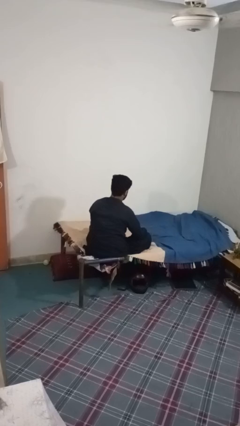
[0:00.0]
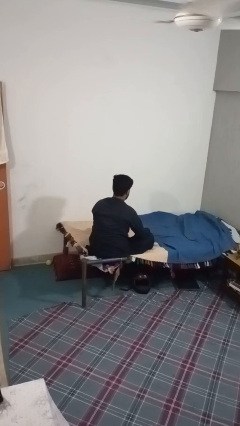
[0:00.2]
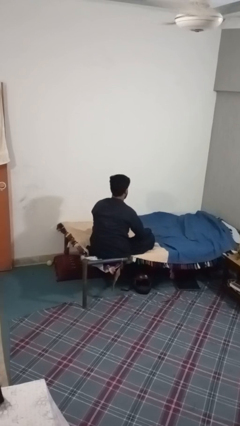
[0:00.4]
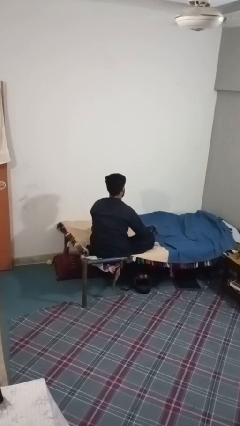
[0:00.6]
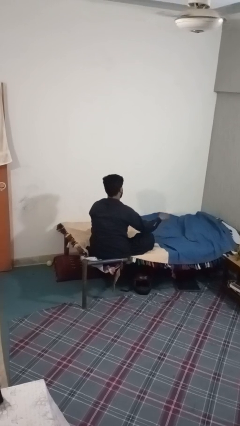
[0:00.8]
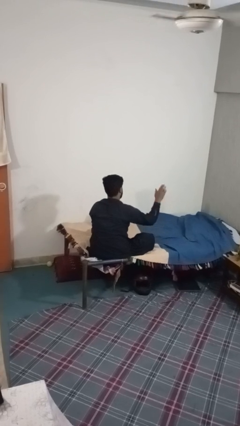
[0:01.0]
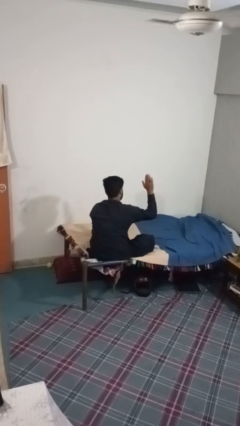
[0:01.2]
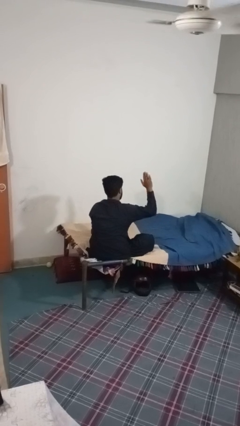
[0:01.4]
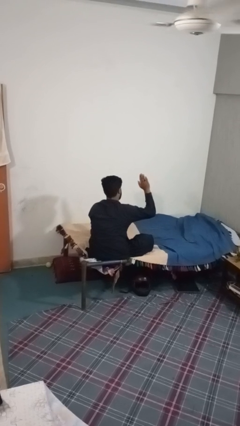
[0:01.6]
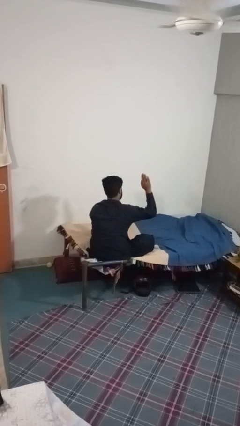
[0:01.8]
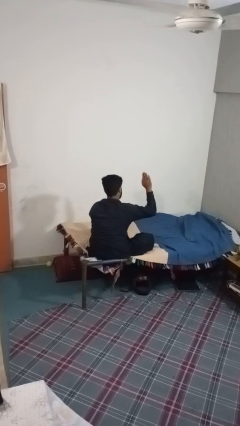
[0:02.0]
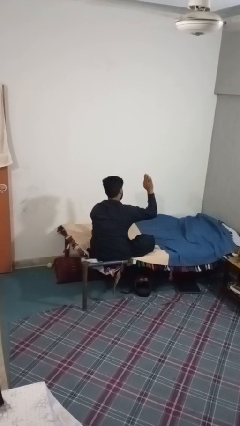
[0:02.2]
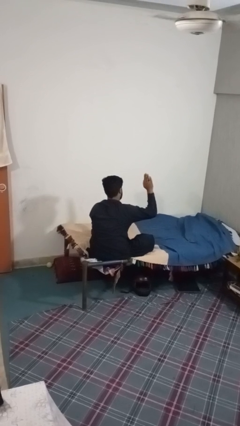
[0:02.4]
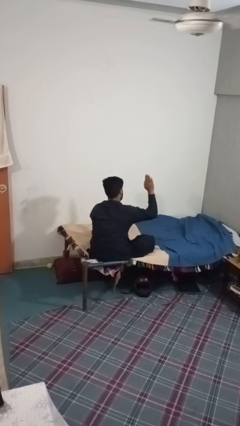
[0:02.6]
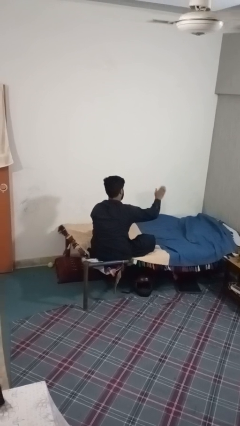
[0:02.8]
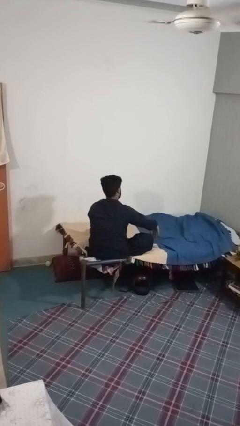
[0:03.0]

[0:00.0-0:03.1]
person gestures stop

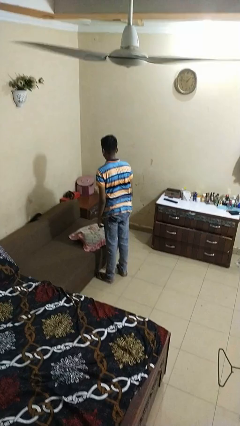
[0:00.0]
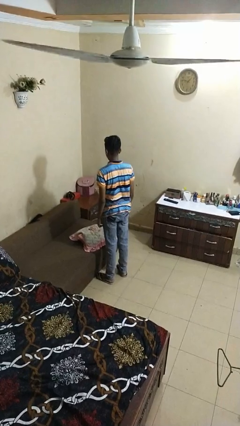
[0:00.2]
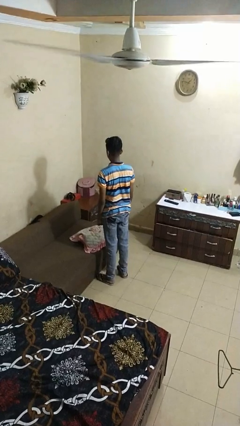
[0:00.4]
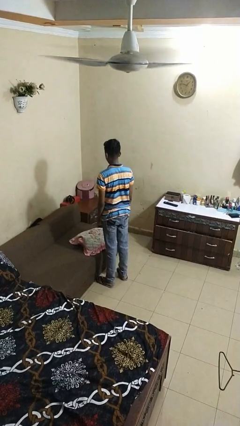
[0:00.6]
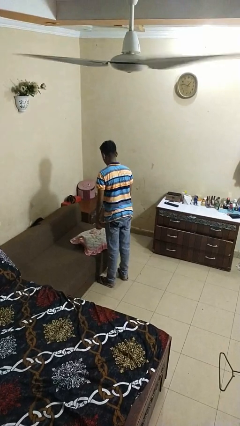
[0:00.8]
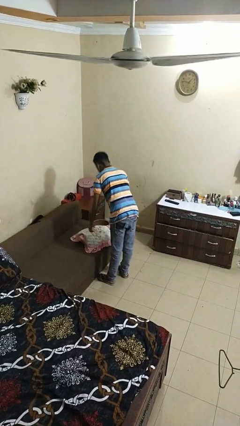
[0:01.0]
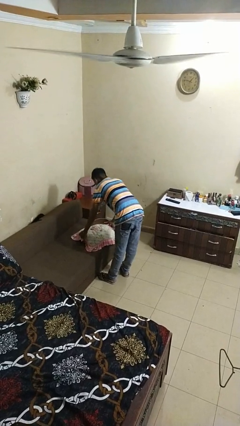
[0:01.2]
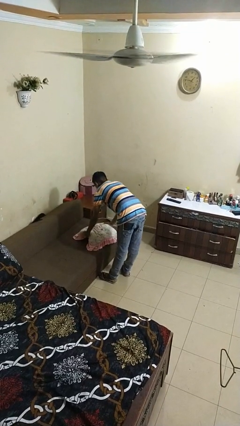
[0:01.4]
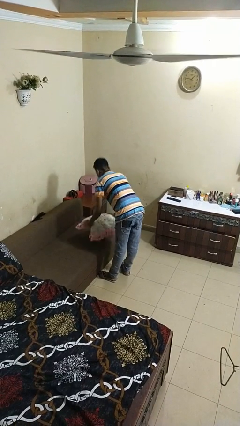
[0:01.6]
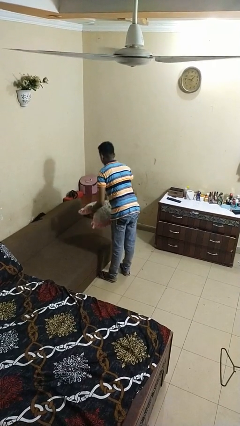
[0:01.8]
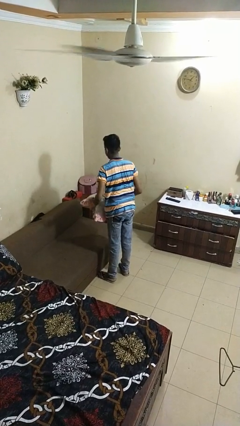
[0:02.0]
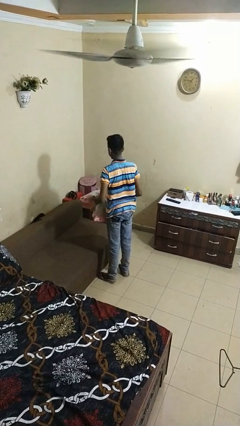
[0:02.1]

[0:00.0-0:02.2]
person picks up object from couch

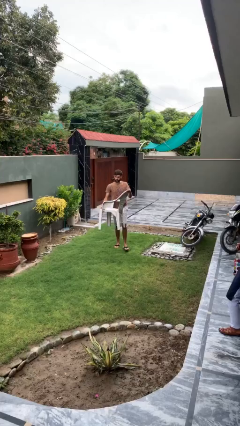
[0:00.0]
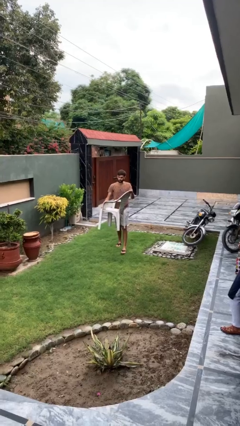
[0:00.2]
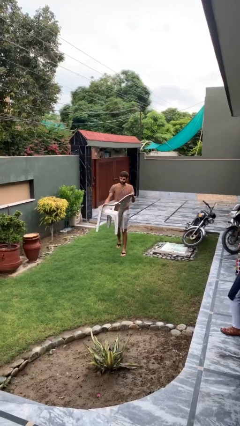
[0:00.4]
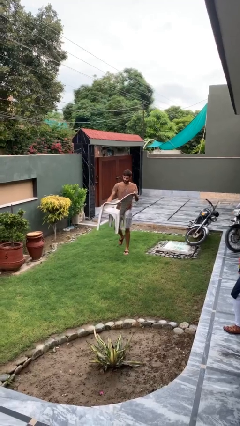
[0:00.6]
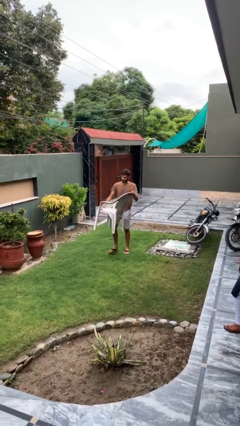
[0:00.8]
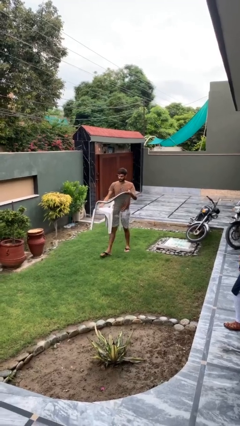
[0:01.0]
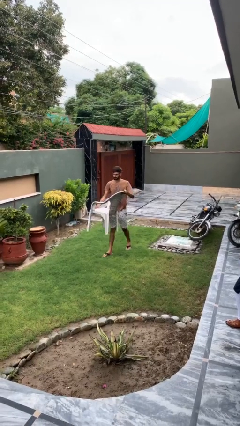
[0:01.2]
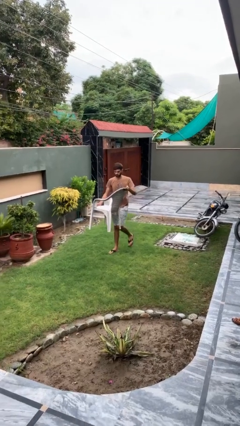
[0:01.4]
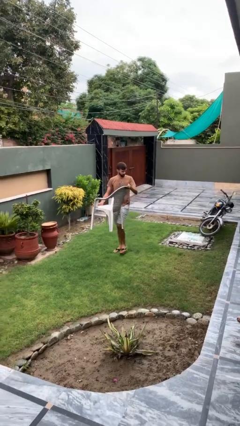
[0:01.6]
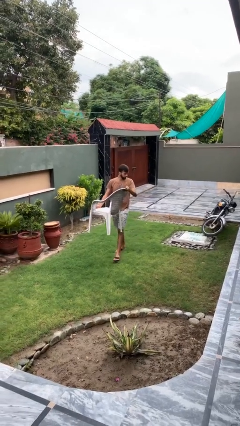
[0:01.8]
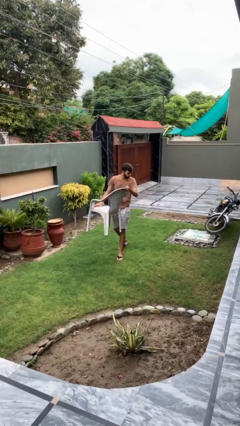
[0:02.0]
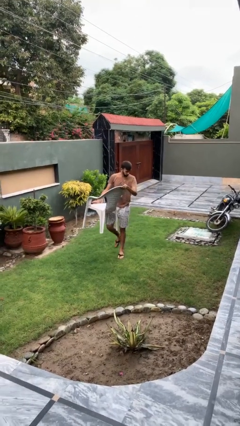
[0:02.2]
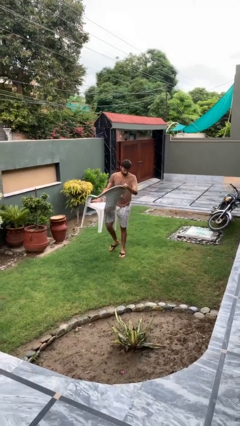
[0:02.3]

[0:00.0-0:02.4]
person carries heavy object

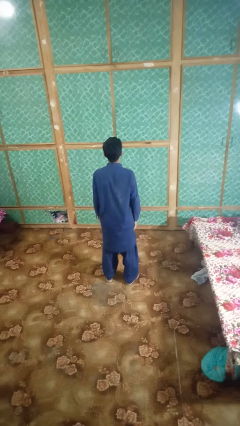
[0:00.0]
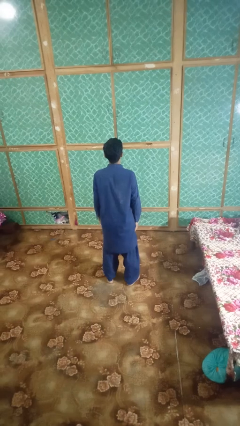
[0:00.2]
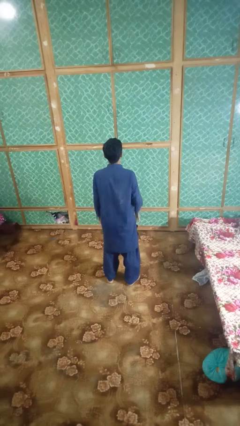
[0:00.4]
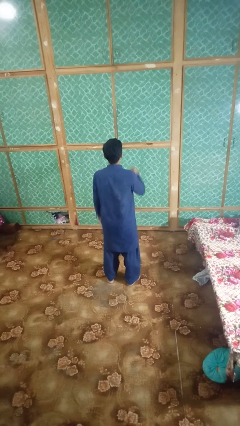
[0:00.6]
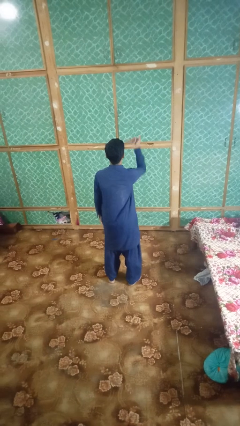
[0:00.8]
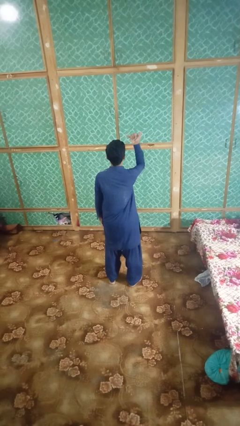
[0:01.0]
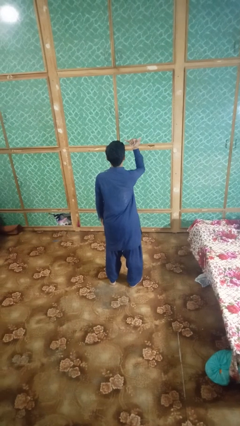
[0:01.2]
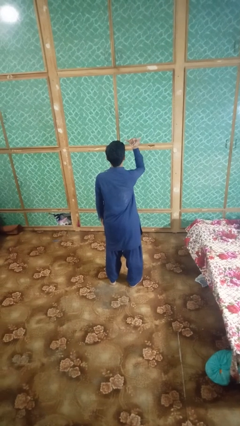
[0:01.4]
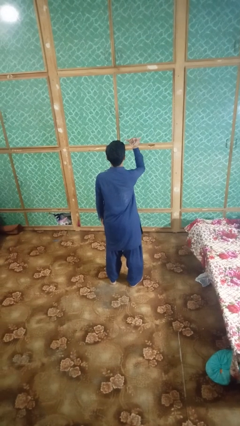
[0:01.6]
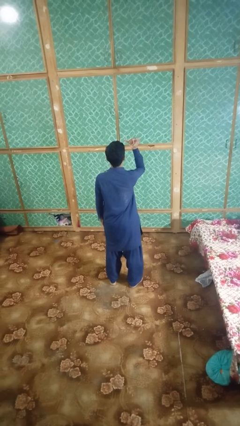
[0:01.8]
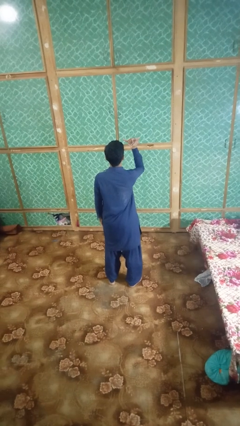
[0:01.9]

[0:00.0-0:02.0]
person gestures hang loose

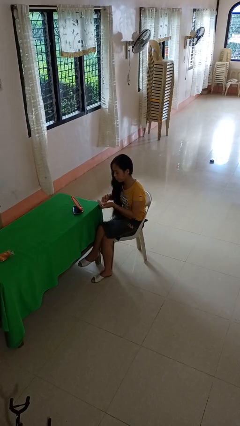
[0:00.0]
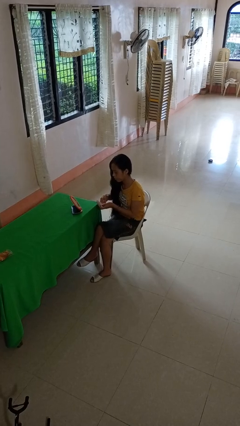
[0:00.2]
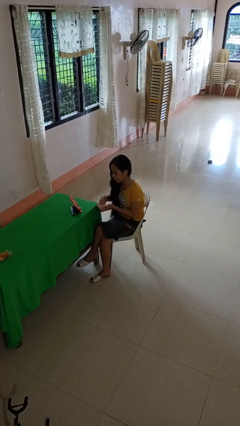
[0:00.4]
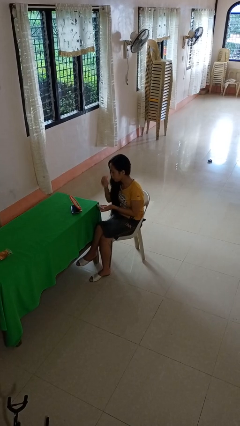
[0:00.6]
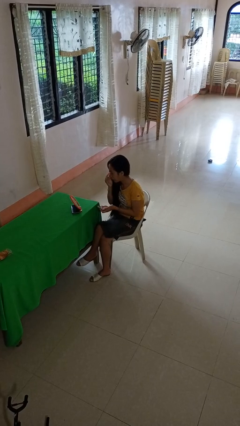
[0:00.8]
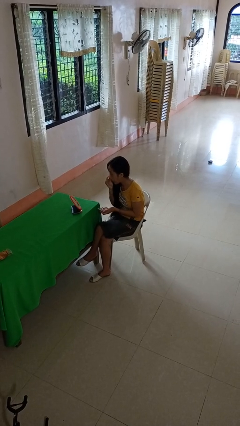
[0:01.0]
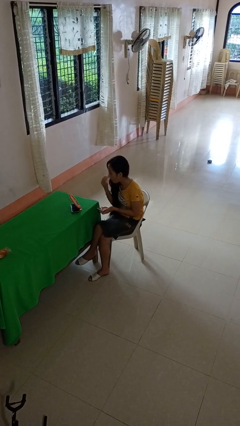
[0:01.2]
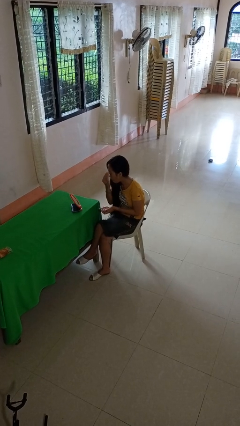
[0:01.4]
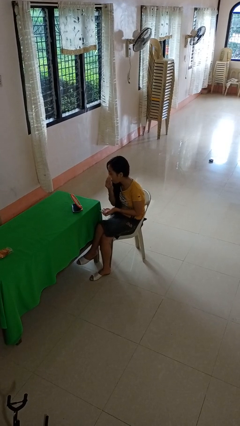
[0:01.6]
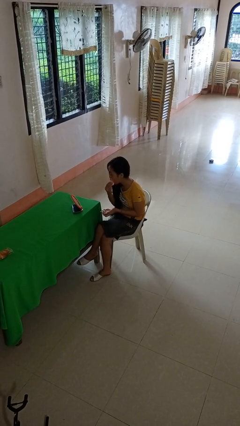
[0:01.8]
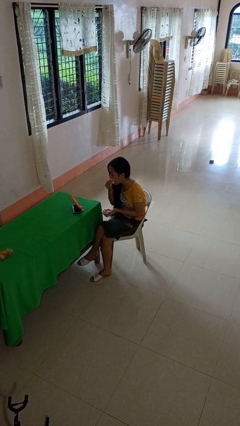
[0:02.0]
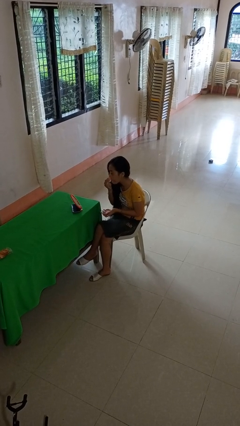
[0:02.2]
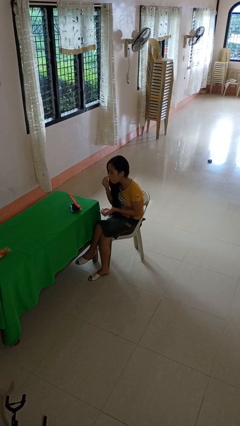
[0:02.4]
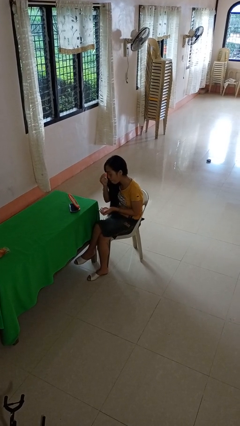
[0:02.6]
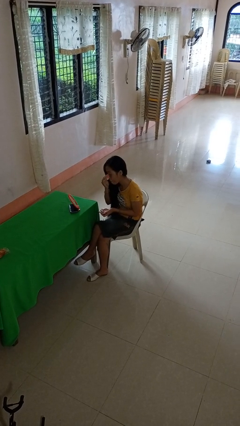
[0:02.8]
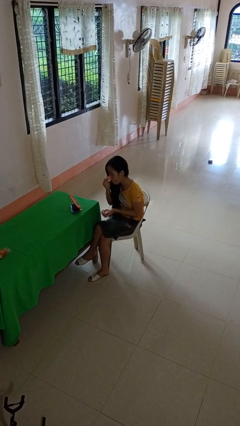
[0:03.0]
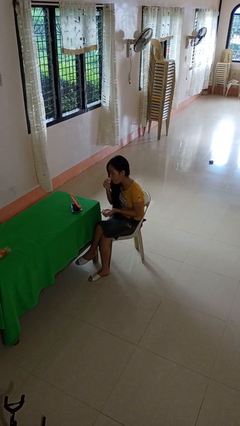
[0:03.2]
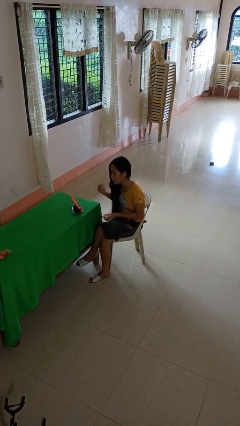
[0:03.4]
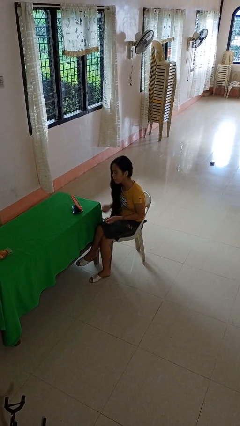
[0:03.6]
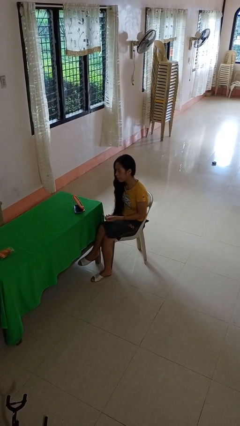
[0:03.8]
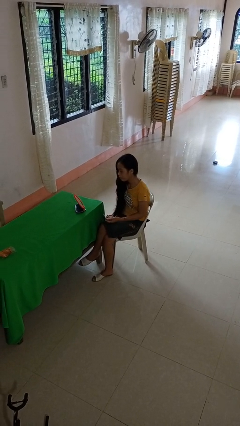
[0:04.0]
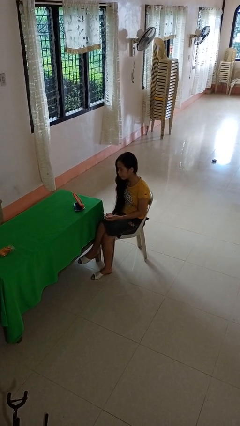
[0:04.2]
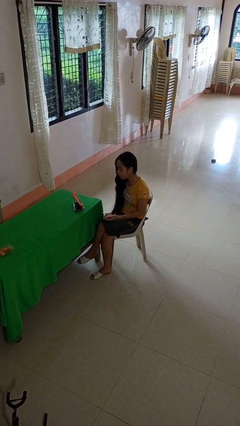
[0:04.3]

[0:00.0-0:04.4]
person applies foundation makeup

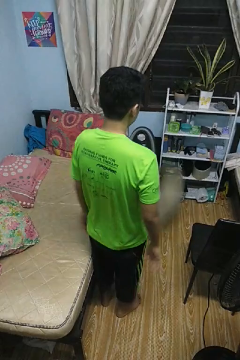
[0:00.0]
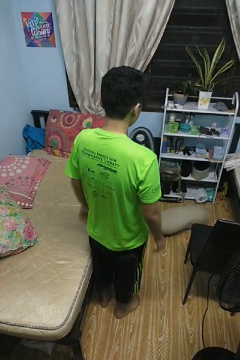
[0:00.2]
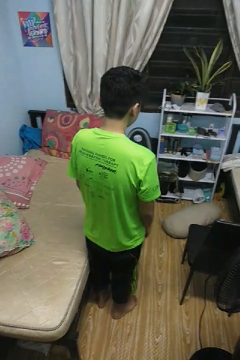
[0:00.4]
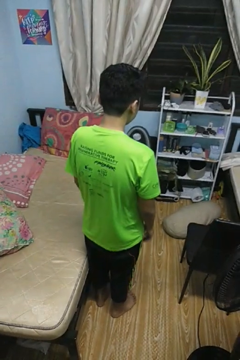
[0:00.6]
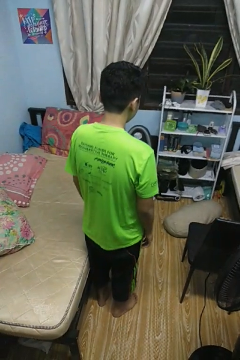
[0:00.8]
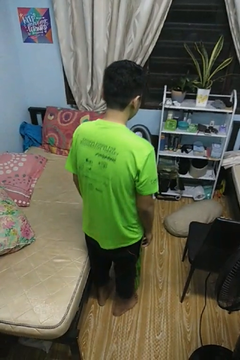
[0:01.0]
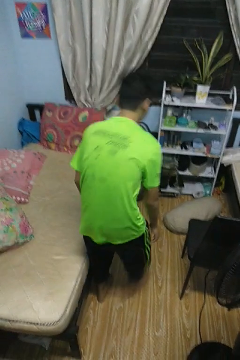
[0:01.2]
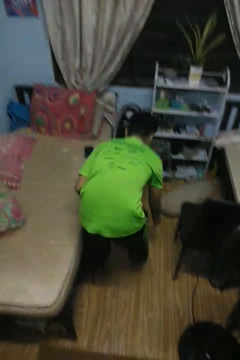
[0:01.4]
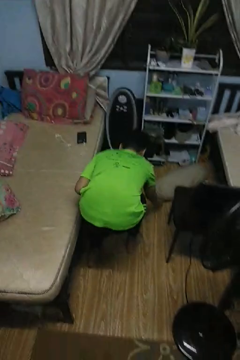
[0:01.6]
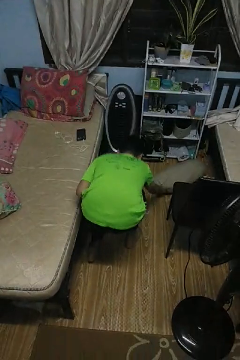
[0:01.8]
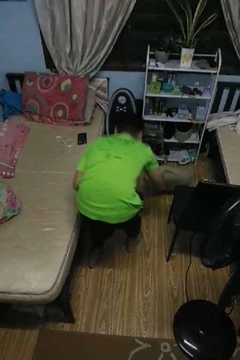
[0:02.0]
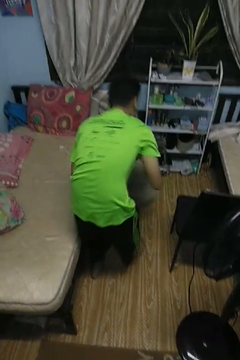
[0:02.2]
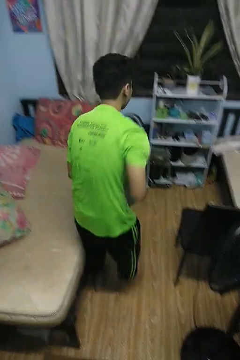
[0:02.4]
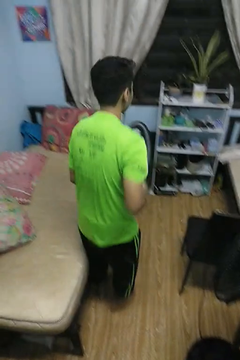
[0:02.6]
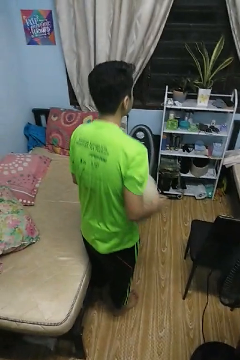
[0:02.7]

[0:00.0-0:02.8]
person picks up object from floor

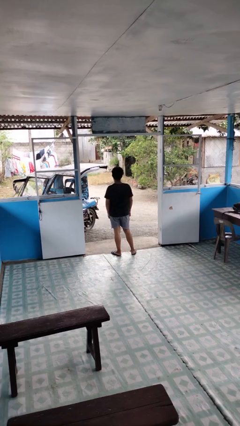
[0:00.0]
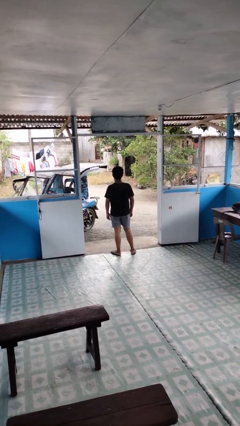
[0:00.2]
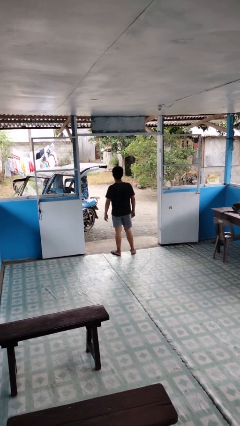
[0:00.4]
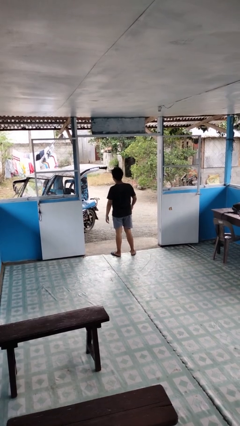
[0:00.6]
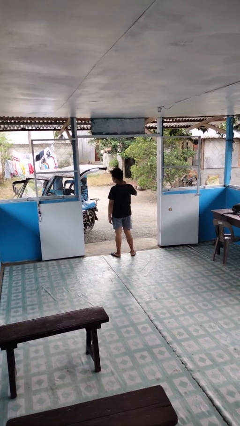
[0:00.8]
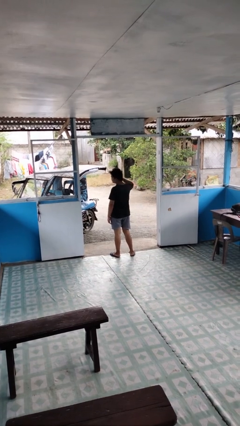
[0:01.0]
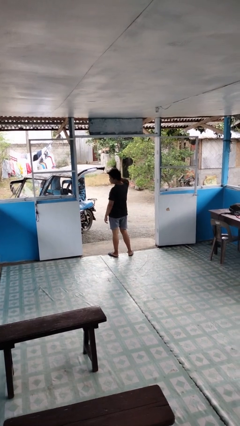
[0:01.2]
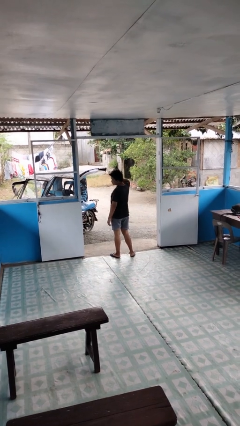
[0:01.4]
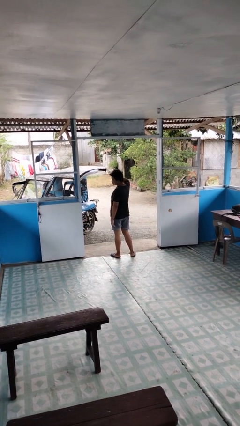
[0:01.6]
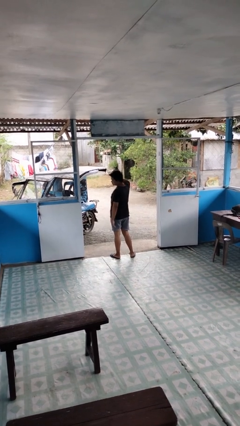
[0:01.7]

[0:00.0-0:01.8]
person touches earlobe
